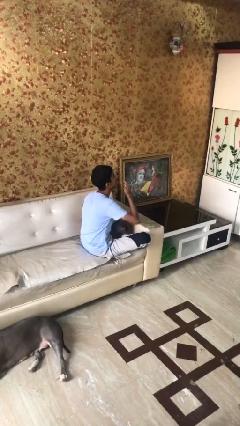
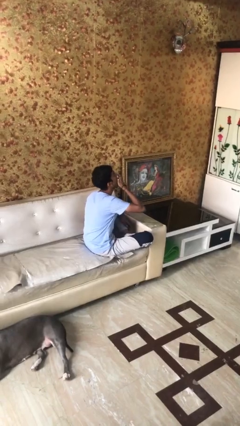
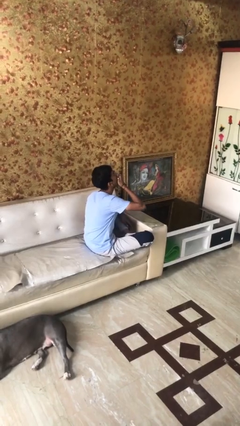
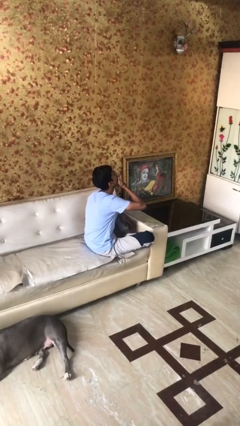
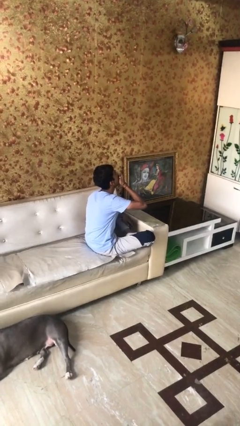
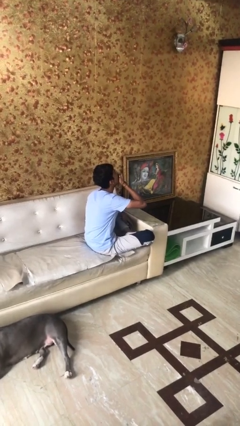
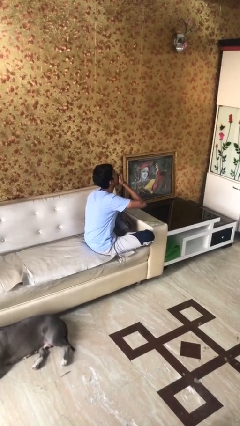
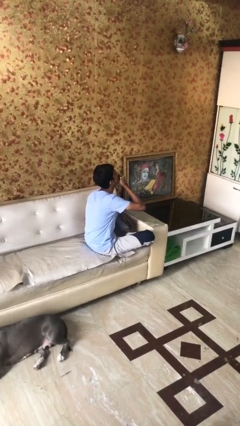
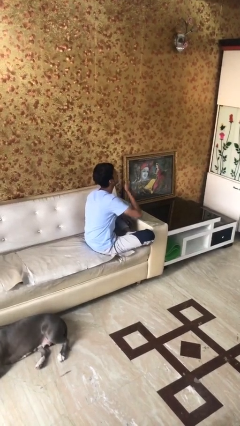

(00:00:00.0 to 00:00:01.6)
person yawns

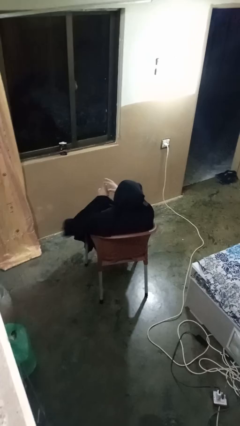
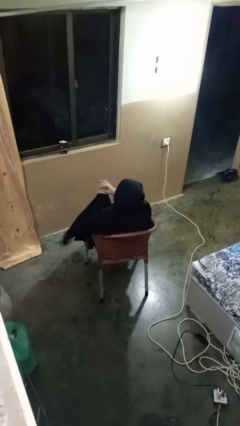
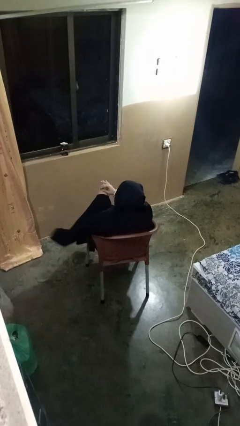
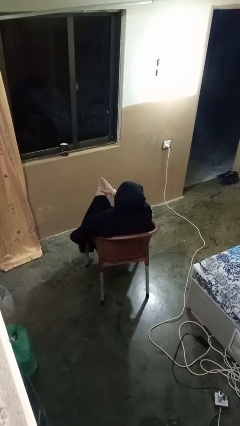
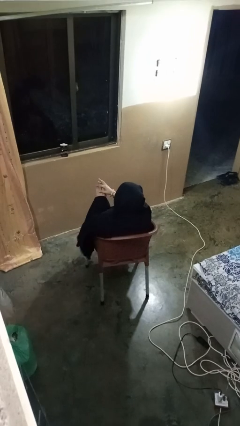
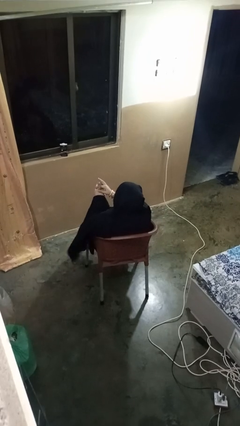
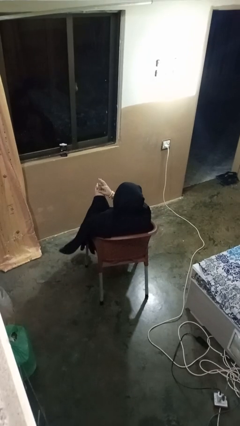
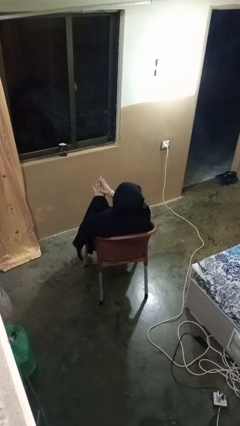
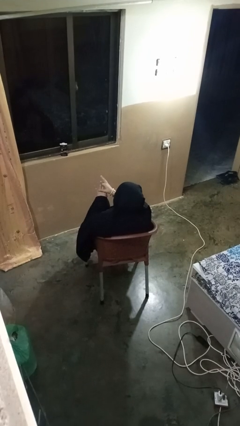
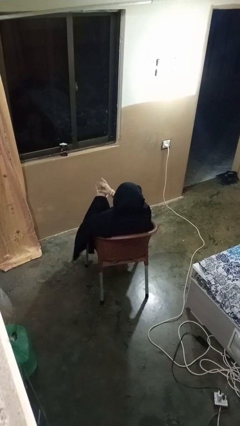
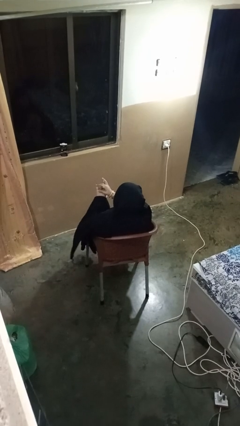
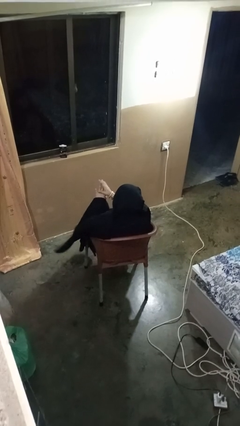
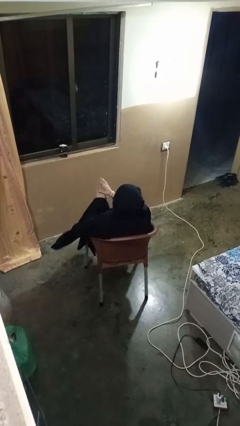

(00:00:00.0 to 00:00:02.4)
person cracks knuckles

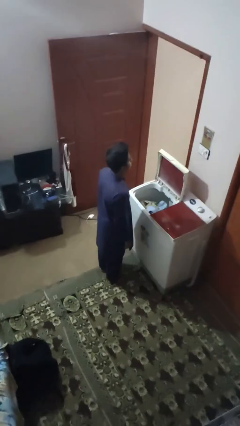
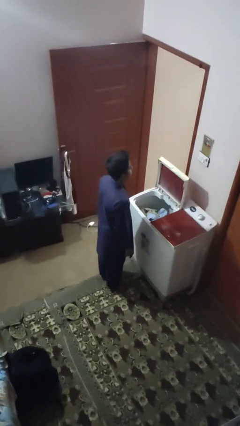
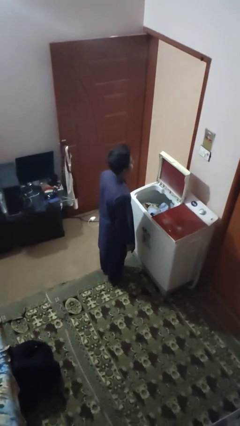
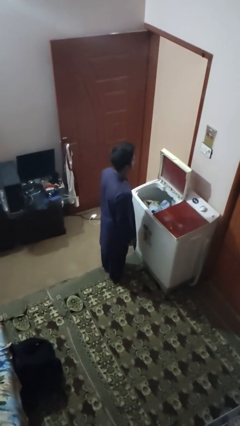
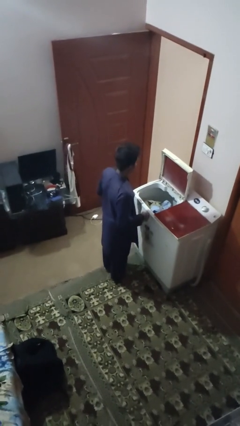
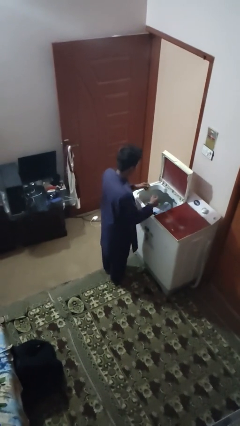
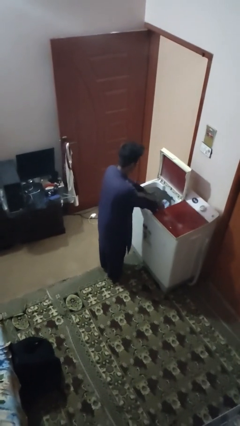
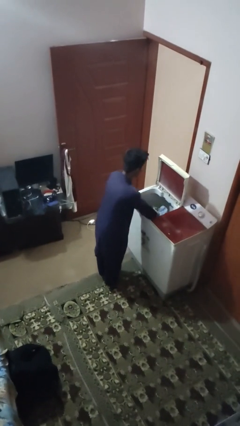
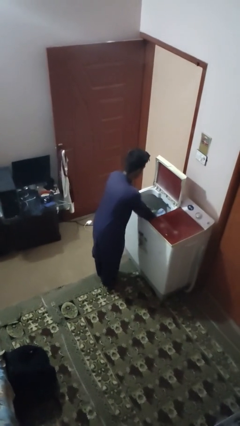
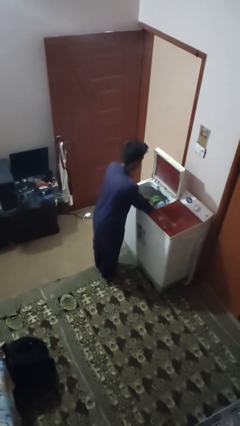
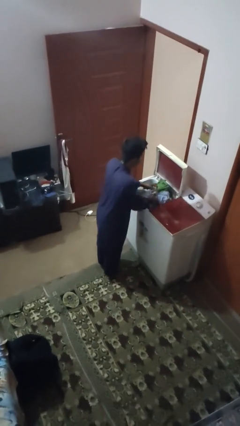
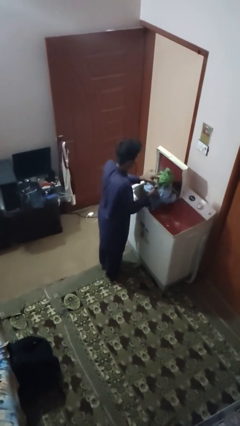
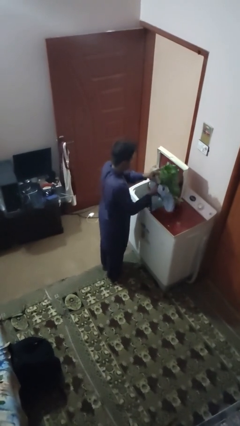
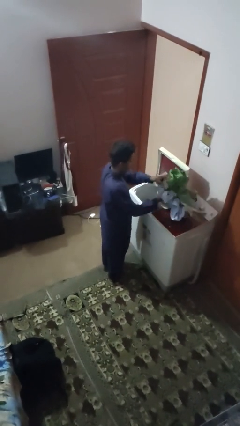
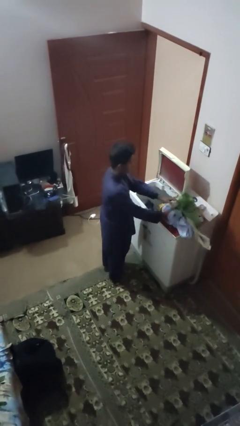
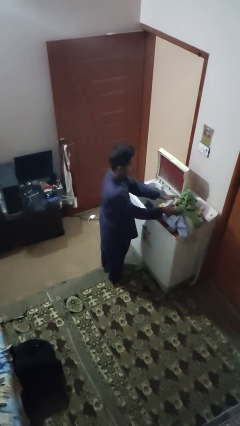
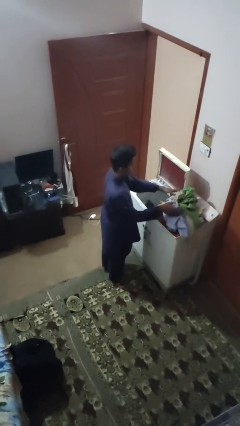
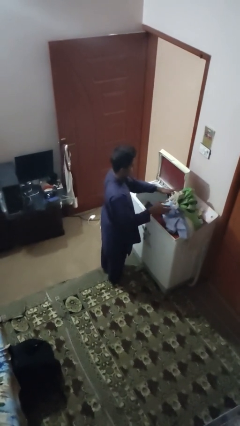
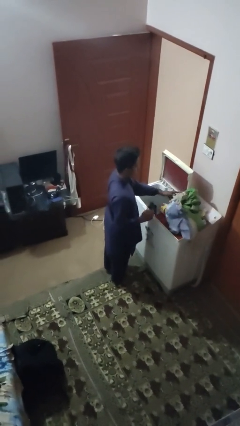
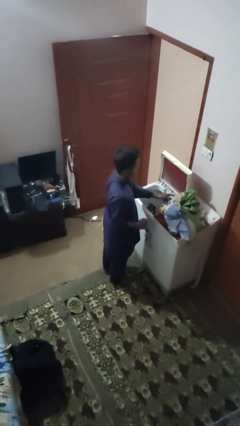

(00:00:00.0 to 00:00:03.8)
person unloads clotheswasher

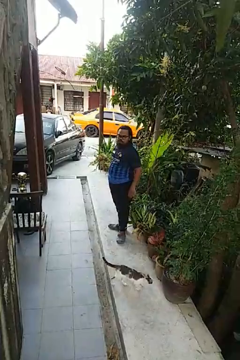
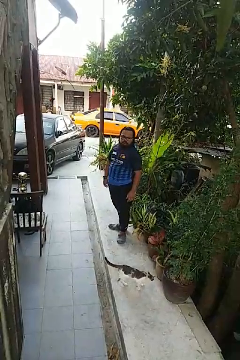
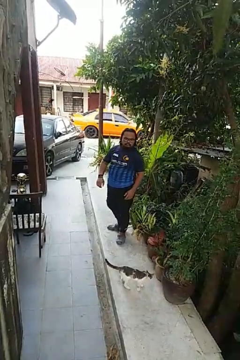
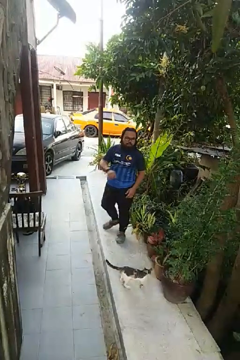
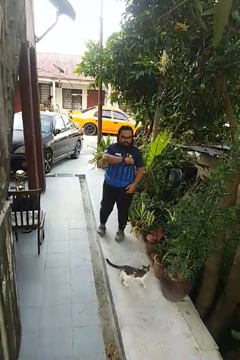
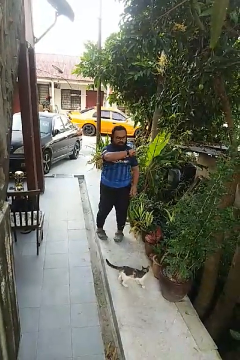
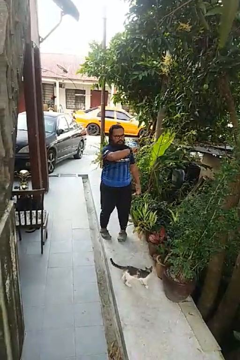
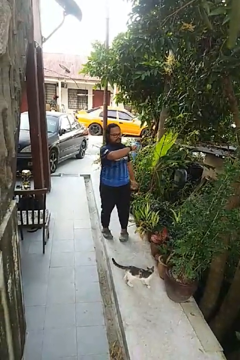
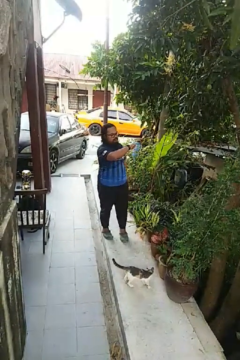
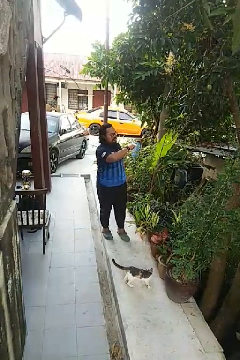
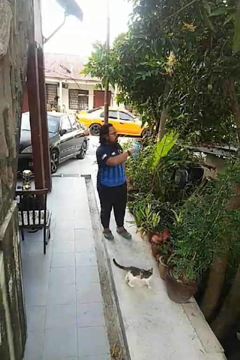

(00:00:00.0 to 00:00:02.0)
person looks at wristwatch

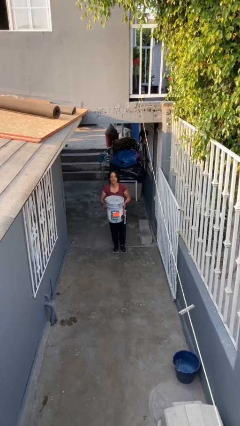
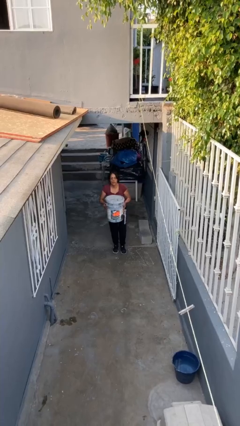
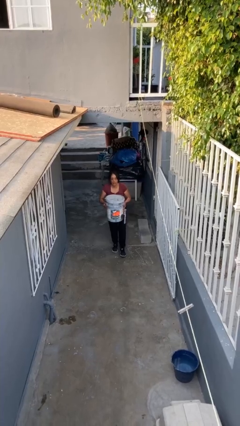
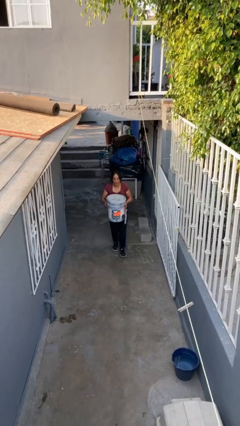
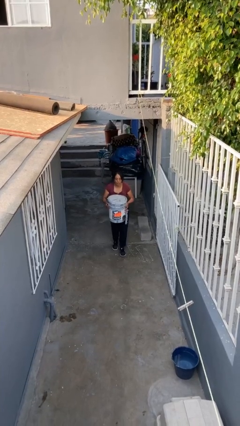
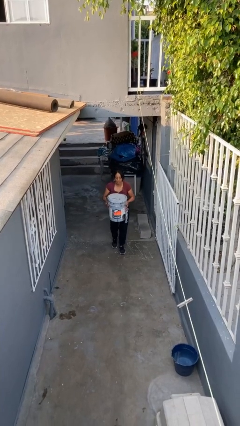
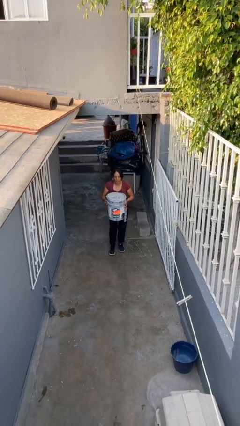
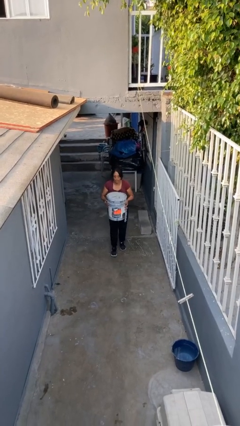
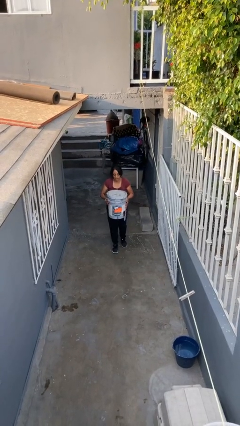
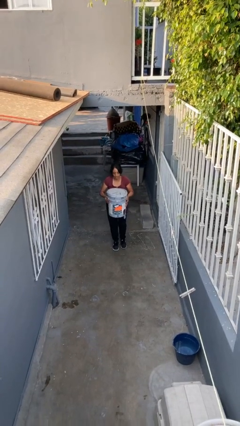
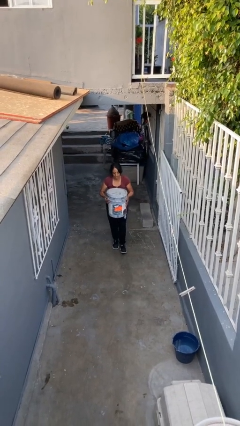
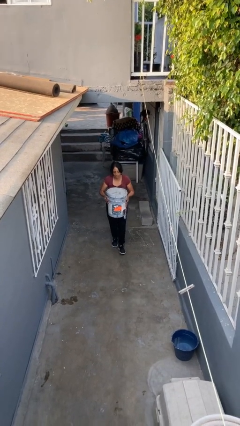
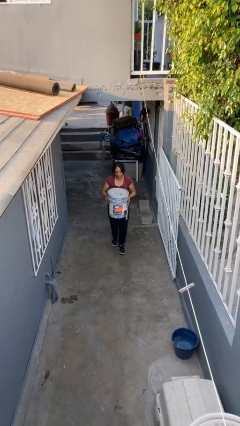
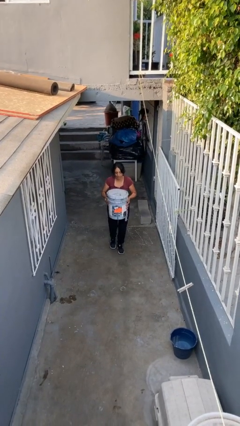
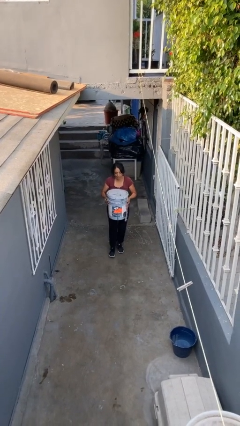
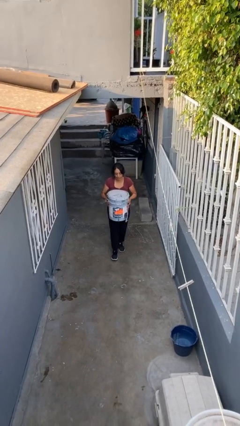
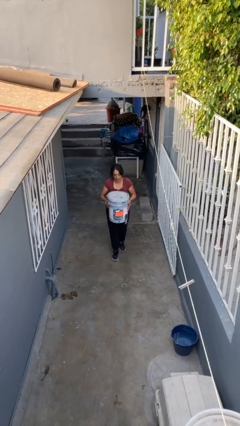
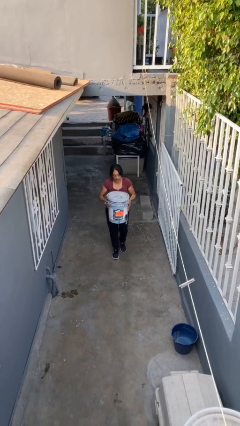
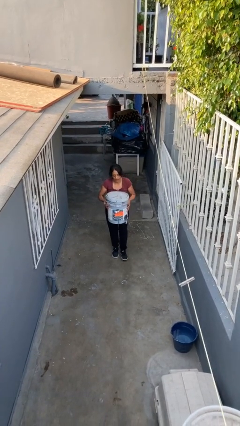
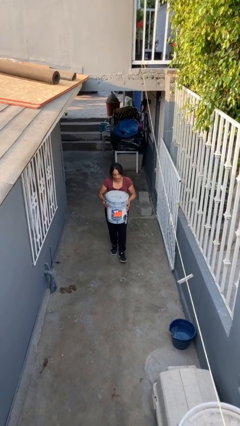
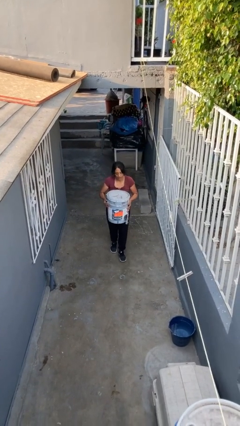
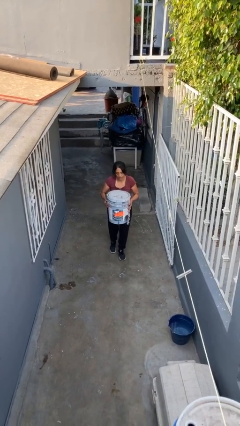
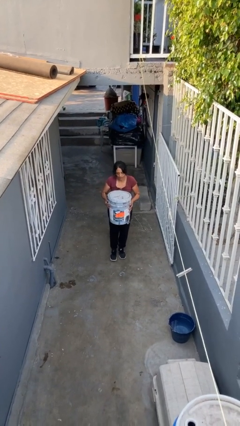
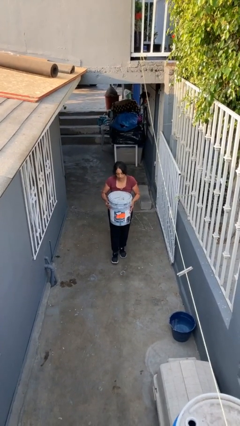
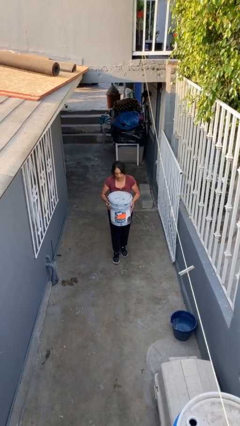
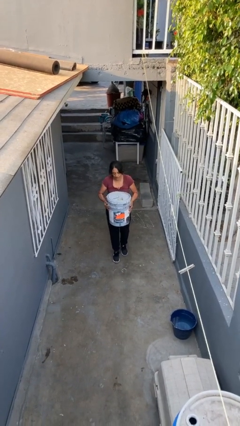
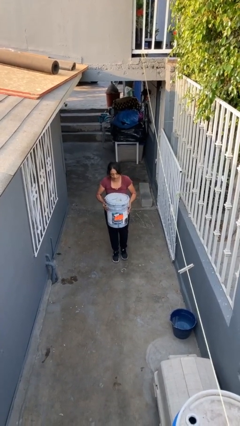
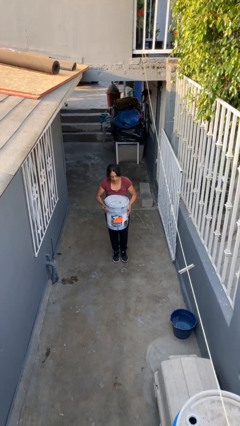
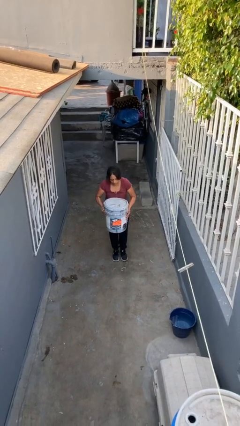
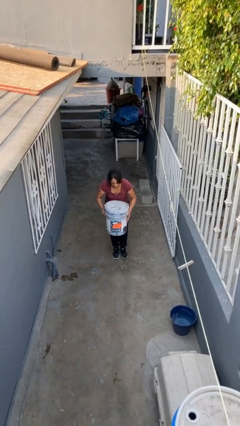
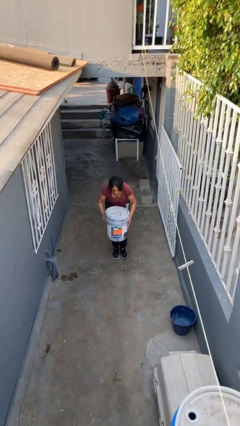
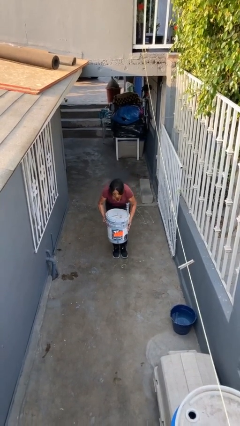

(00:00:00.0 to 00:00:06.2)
person carries heavy object

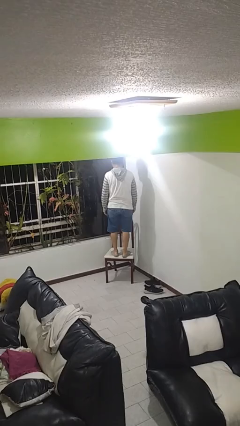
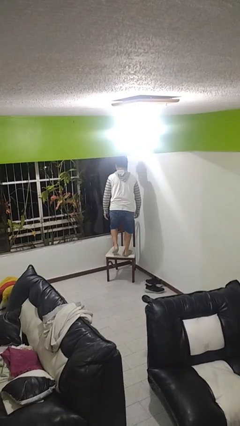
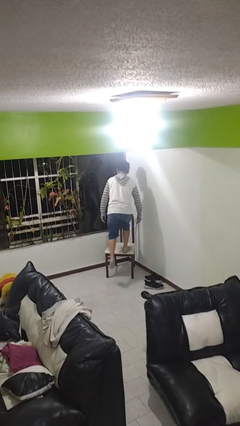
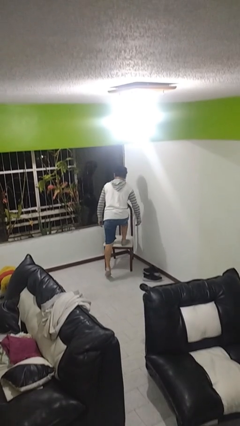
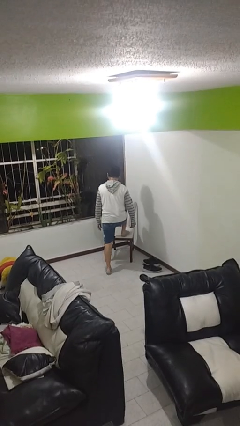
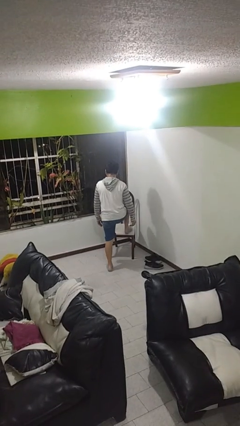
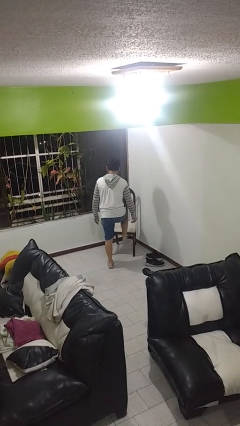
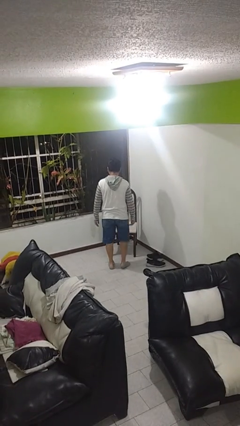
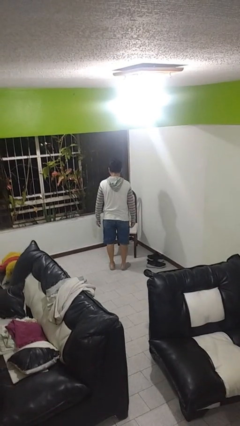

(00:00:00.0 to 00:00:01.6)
person climbs off chair

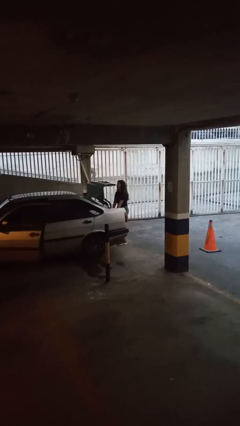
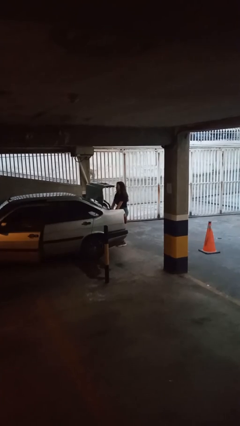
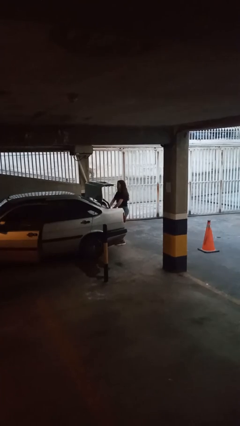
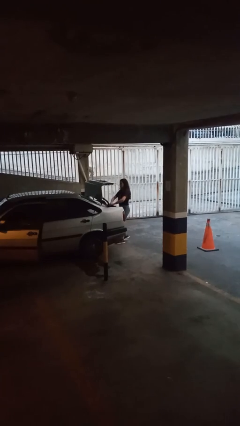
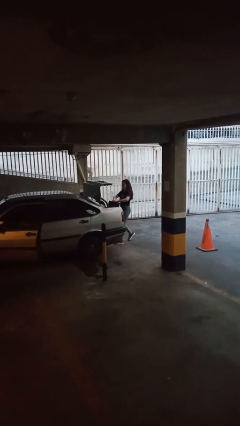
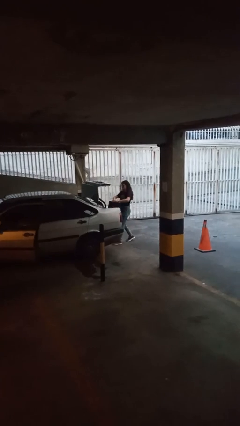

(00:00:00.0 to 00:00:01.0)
person unloads car
